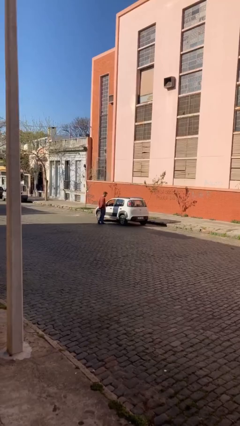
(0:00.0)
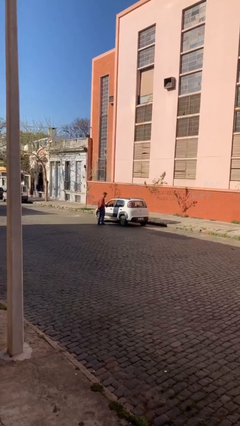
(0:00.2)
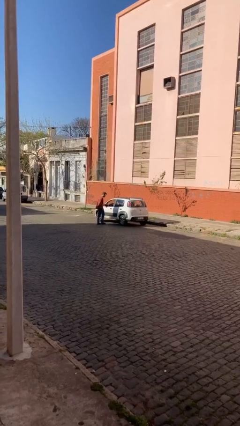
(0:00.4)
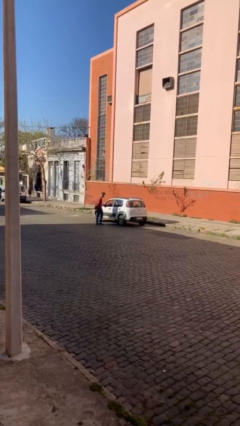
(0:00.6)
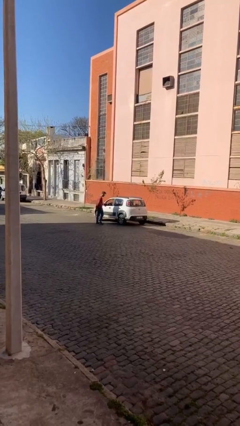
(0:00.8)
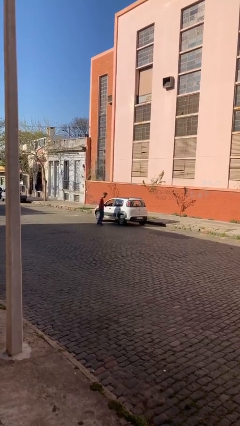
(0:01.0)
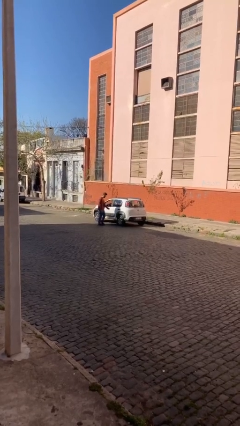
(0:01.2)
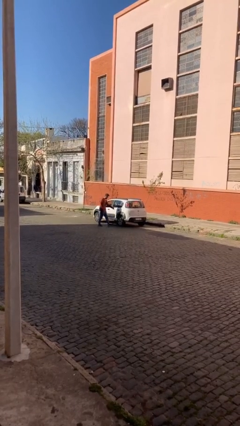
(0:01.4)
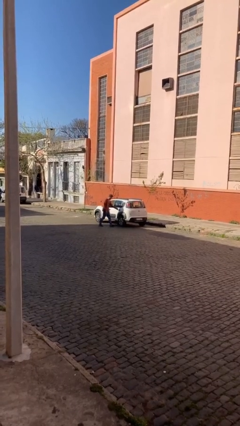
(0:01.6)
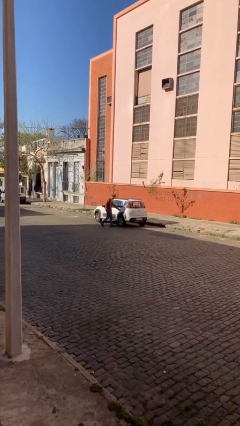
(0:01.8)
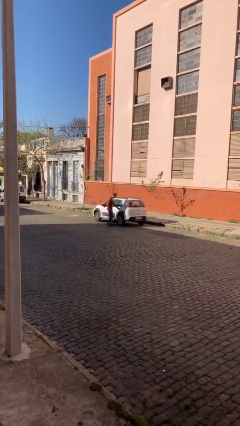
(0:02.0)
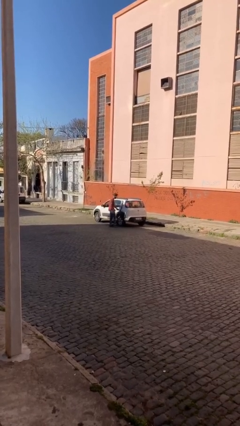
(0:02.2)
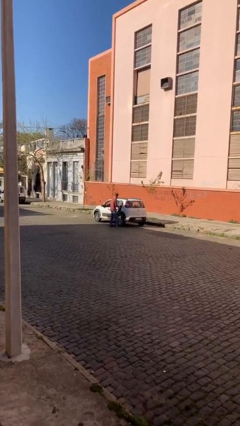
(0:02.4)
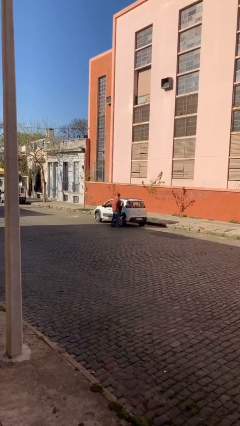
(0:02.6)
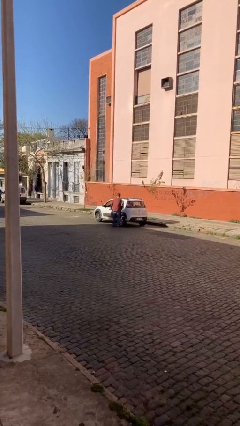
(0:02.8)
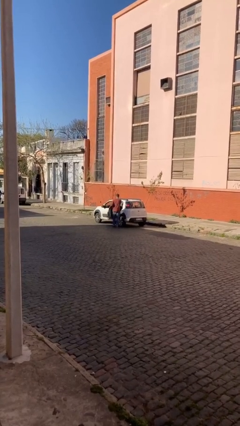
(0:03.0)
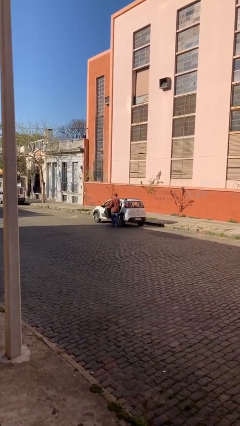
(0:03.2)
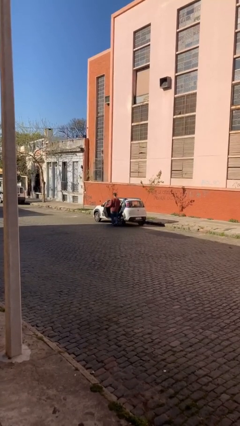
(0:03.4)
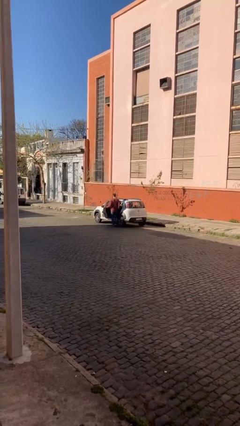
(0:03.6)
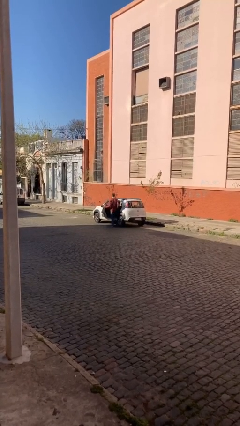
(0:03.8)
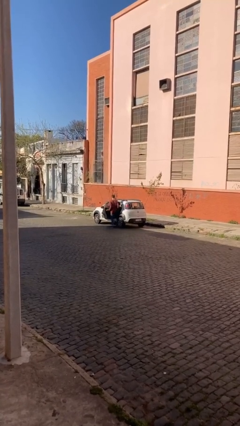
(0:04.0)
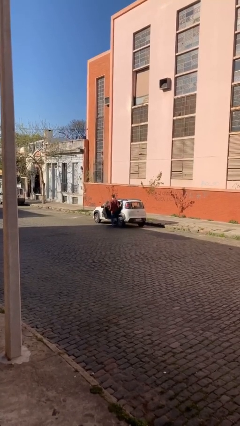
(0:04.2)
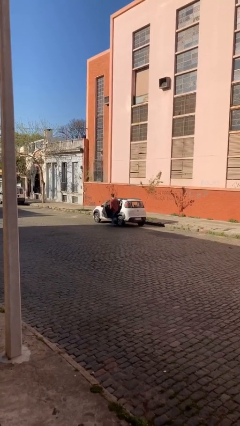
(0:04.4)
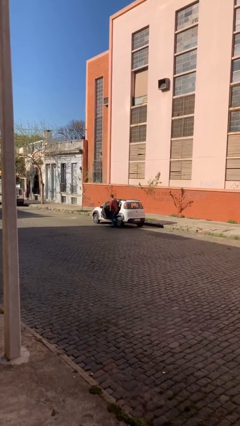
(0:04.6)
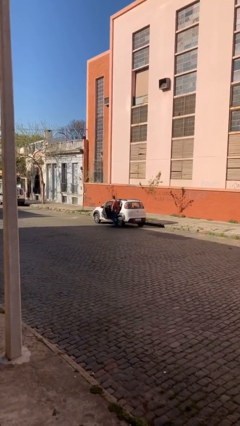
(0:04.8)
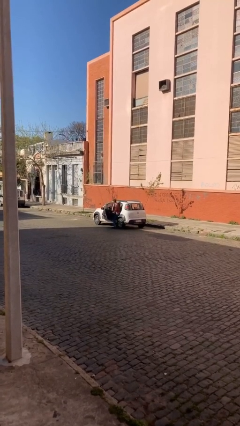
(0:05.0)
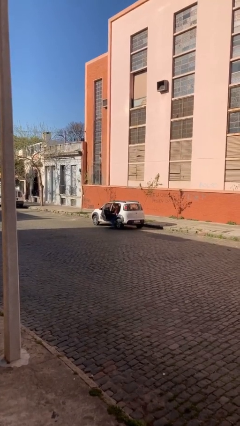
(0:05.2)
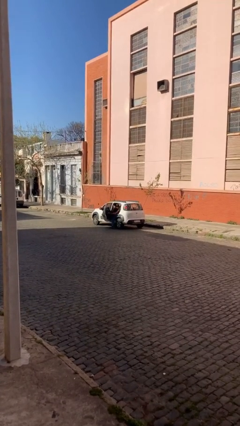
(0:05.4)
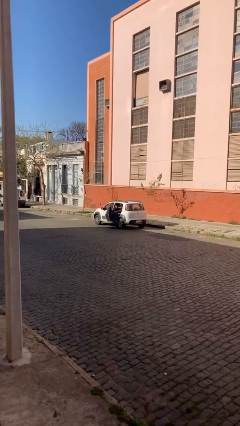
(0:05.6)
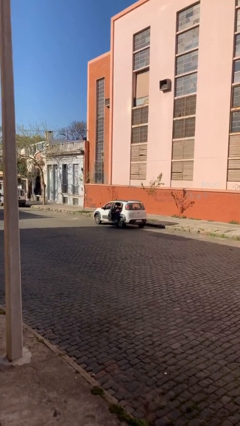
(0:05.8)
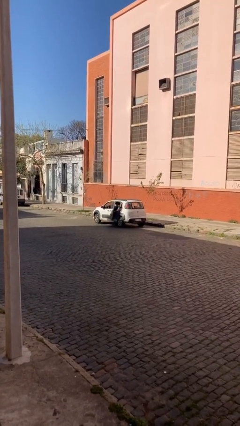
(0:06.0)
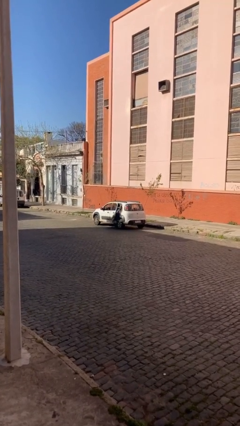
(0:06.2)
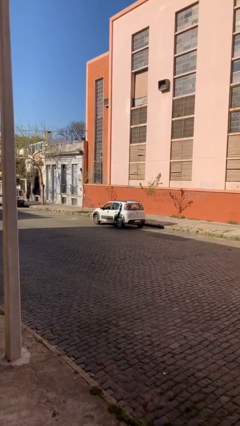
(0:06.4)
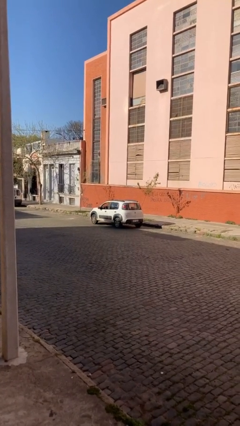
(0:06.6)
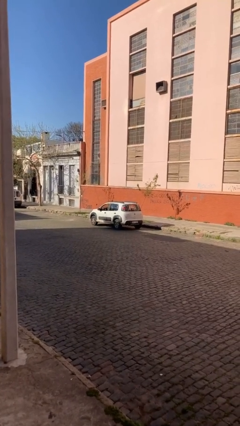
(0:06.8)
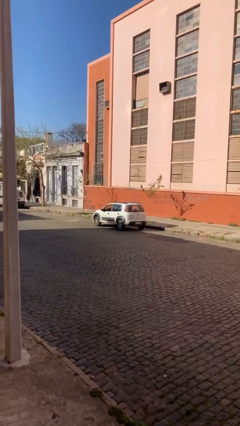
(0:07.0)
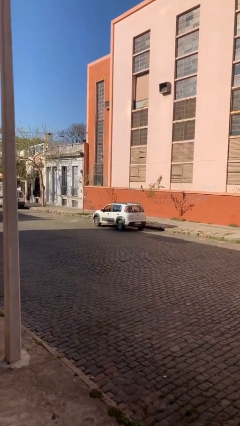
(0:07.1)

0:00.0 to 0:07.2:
car picks up person

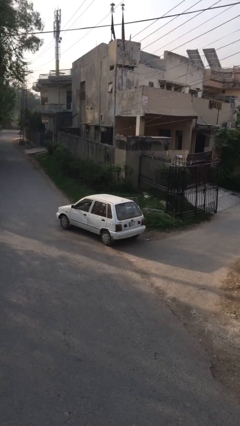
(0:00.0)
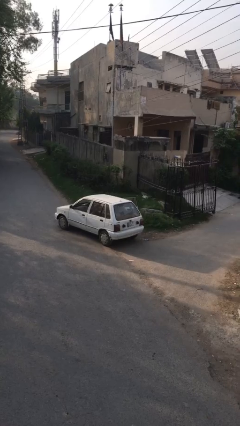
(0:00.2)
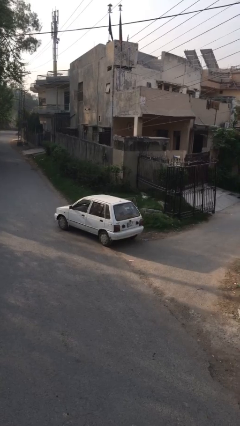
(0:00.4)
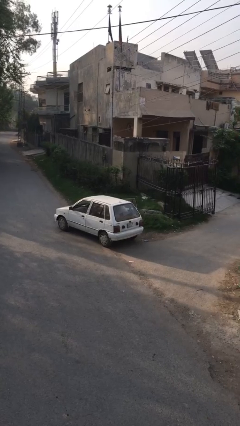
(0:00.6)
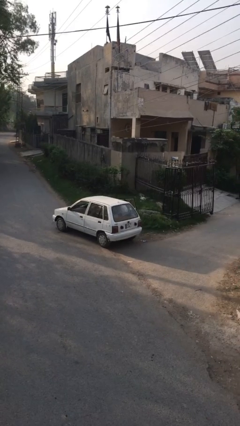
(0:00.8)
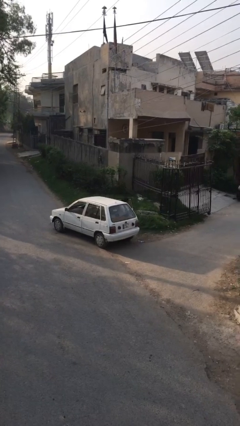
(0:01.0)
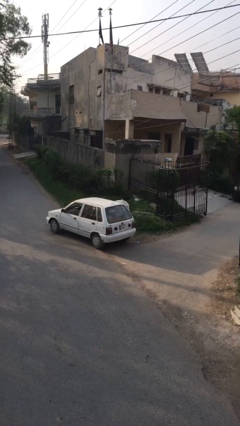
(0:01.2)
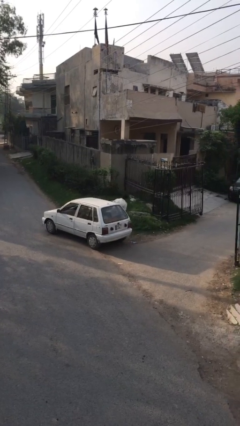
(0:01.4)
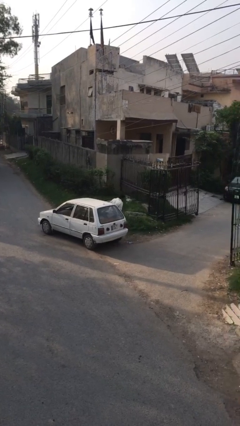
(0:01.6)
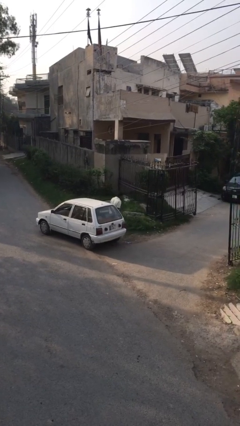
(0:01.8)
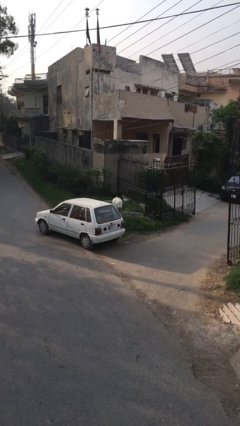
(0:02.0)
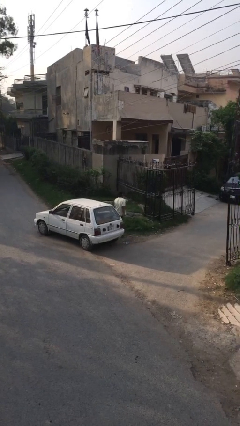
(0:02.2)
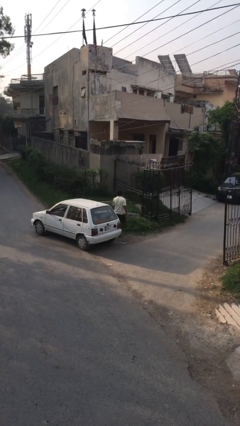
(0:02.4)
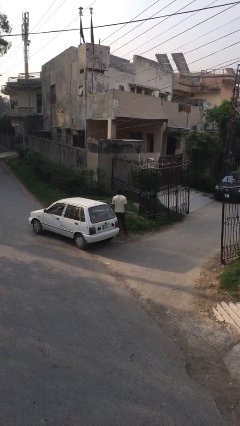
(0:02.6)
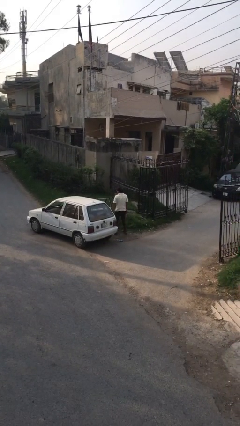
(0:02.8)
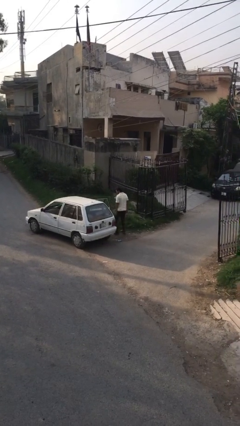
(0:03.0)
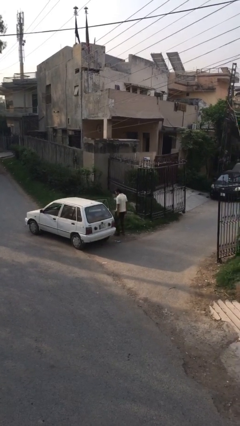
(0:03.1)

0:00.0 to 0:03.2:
person exits car

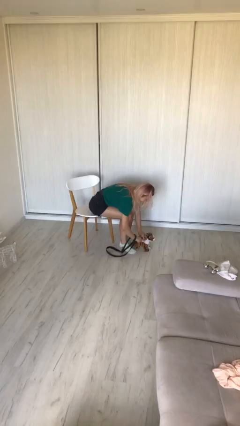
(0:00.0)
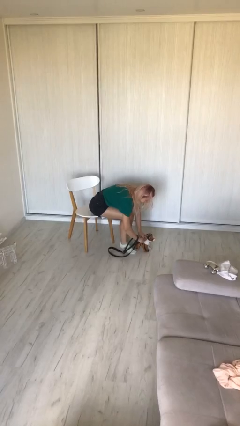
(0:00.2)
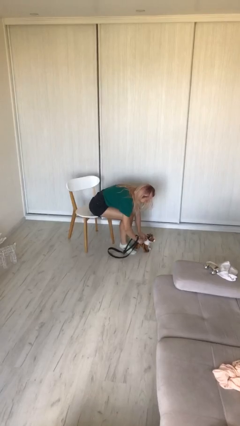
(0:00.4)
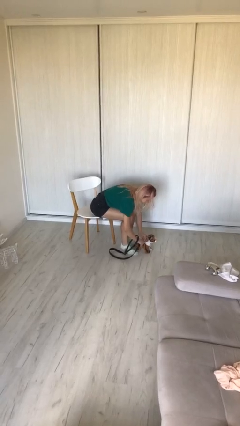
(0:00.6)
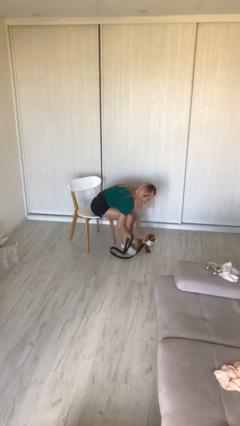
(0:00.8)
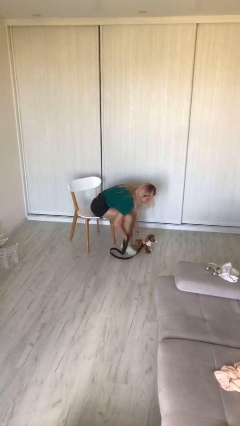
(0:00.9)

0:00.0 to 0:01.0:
person attaches leash to dog

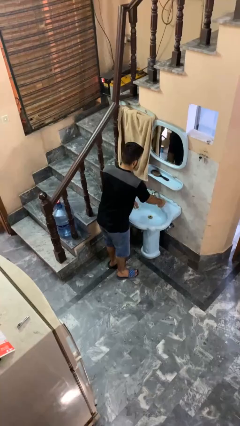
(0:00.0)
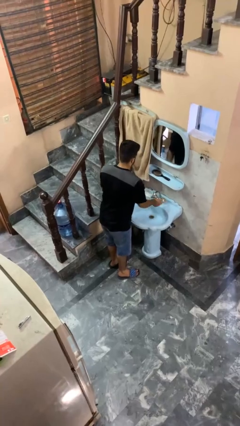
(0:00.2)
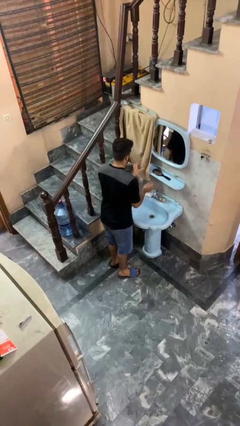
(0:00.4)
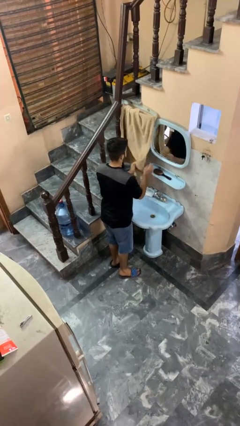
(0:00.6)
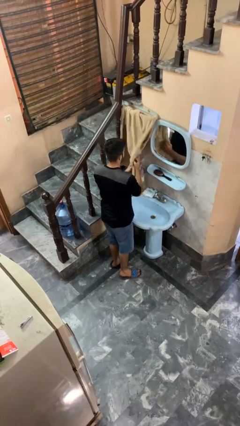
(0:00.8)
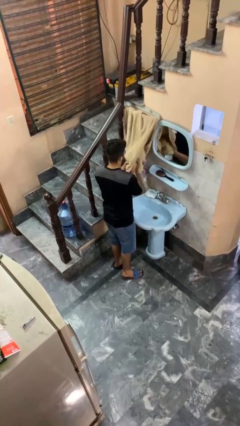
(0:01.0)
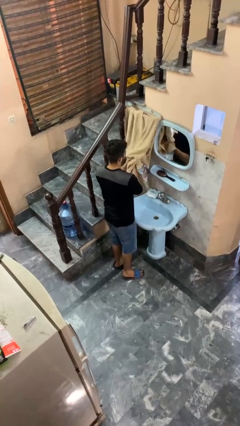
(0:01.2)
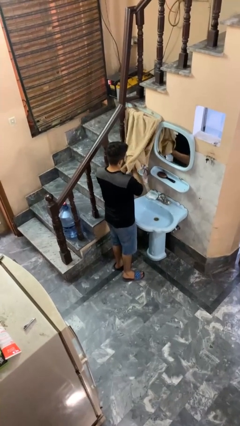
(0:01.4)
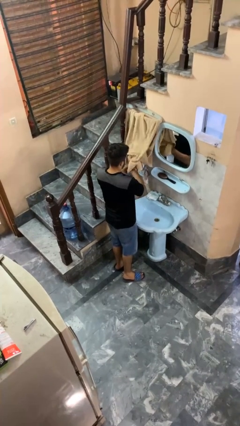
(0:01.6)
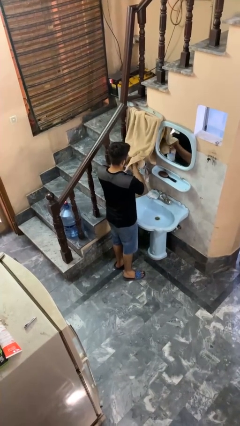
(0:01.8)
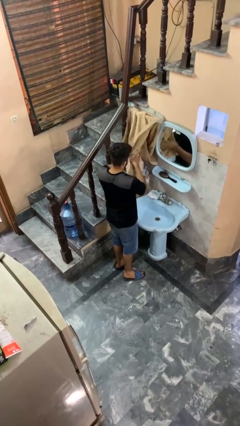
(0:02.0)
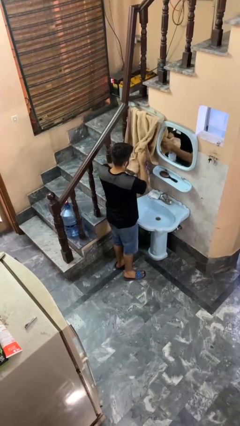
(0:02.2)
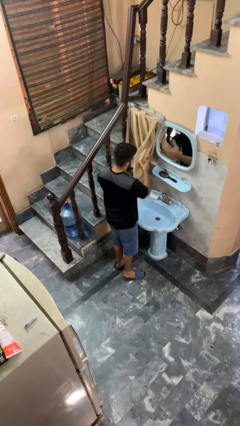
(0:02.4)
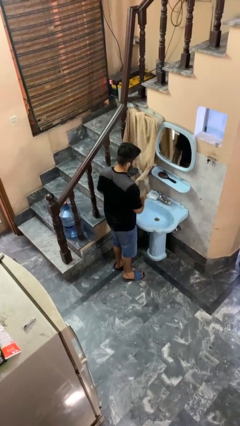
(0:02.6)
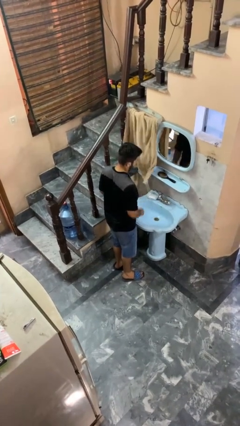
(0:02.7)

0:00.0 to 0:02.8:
person dries hands with towel

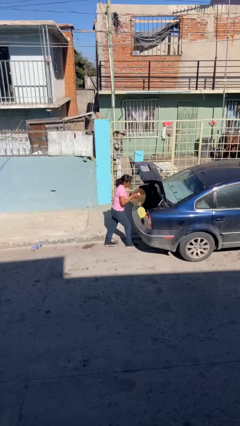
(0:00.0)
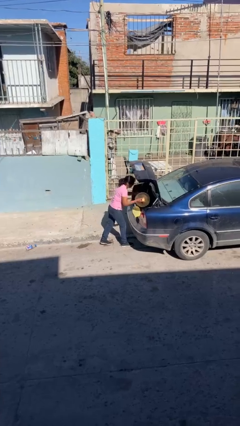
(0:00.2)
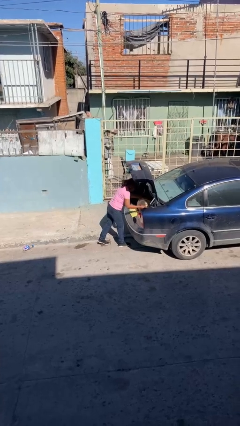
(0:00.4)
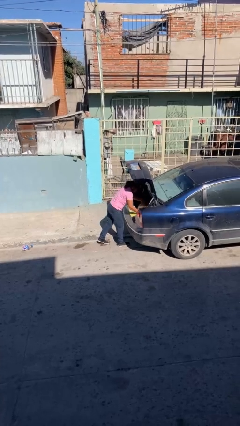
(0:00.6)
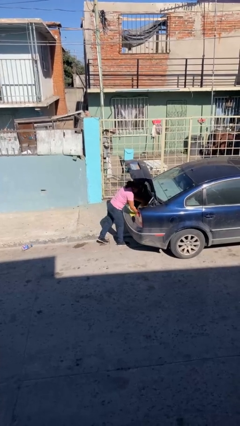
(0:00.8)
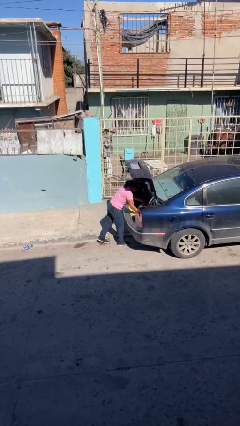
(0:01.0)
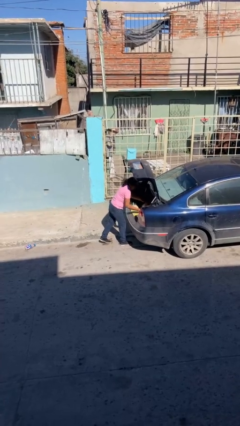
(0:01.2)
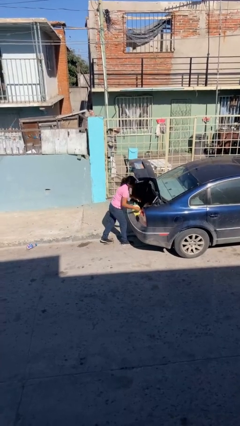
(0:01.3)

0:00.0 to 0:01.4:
person loads car

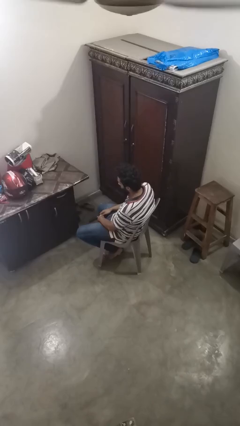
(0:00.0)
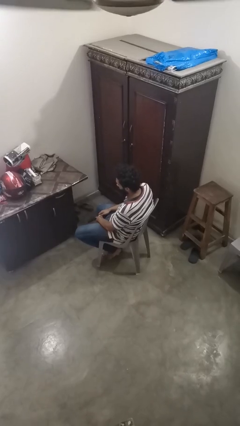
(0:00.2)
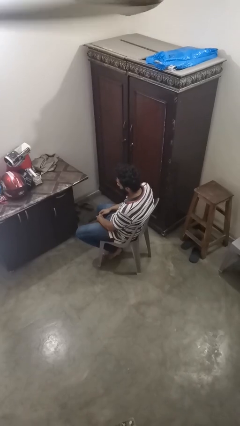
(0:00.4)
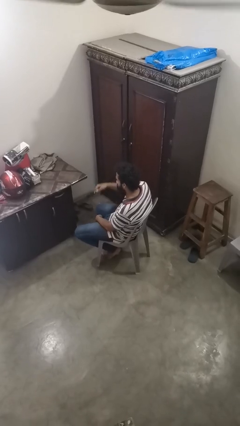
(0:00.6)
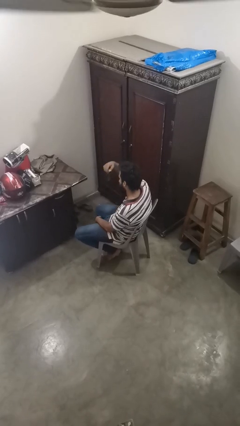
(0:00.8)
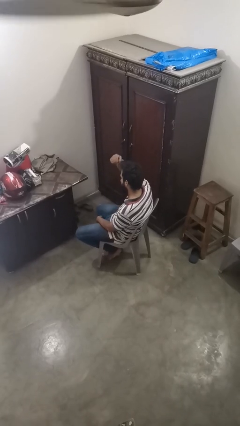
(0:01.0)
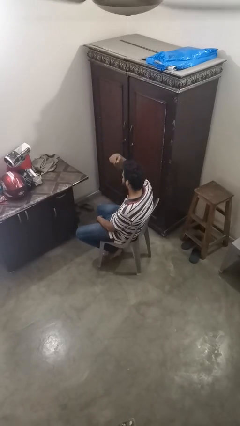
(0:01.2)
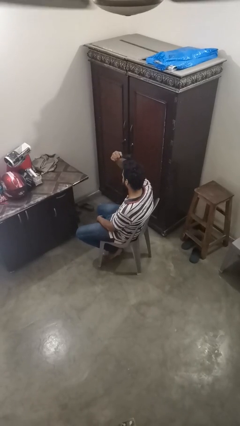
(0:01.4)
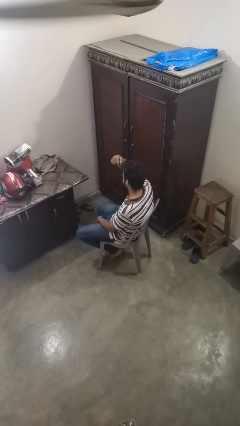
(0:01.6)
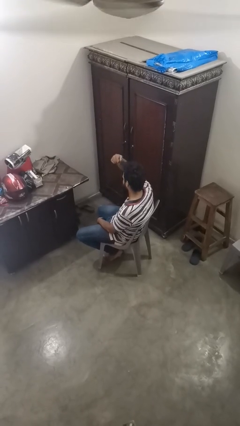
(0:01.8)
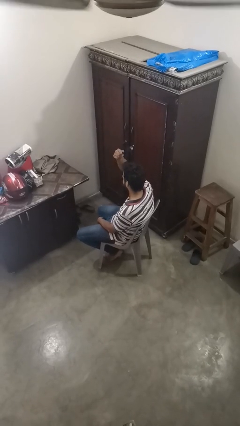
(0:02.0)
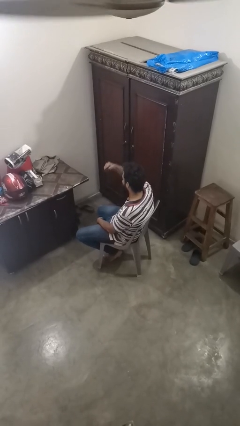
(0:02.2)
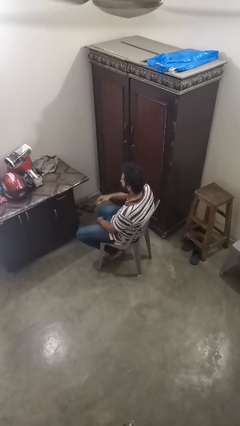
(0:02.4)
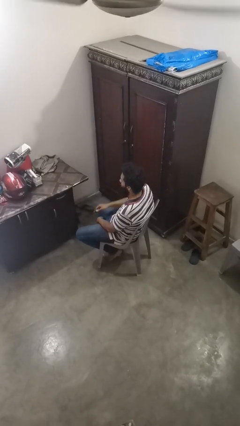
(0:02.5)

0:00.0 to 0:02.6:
person brushes hair
